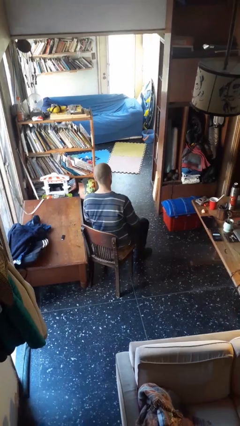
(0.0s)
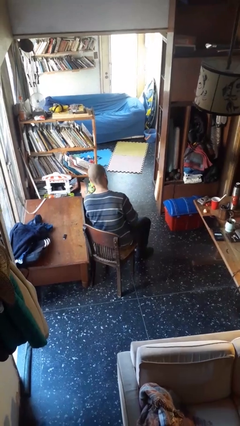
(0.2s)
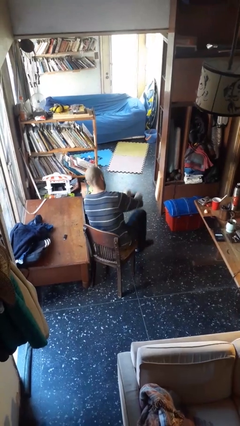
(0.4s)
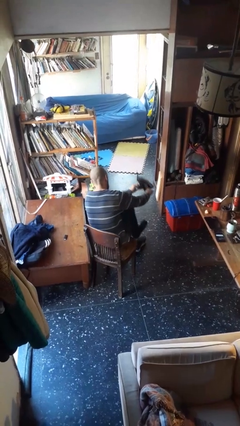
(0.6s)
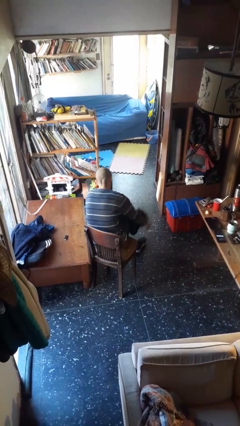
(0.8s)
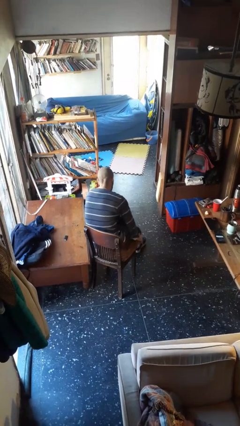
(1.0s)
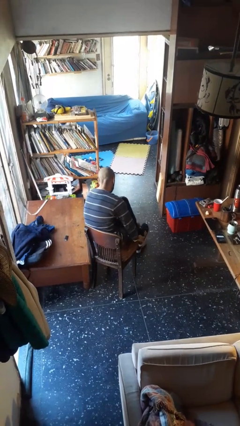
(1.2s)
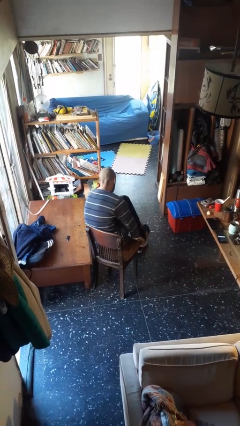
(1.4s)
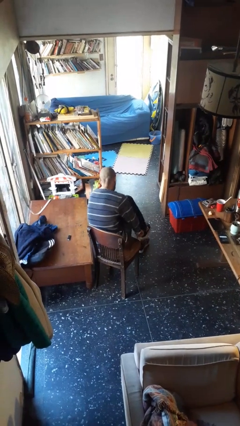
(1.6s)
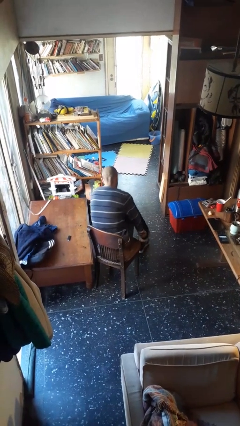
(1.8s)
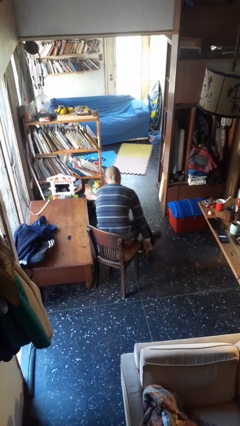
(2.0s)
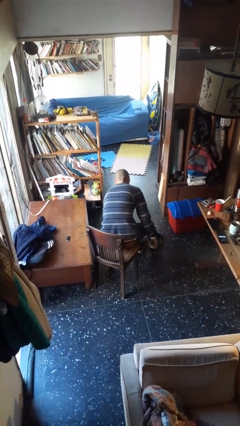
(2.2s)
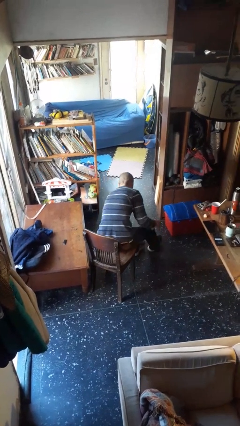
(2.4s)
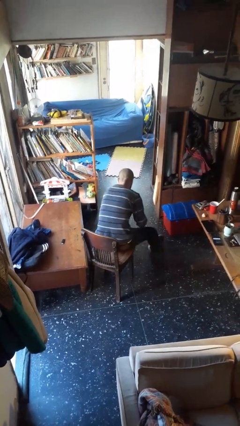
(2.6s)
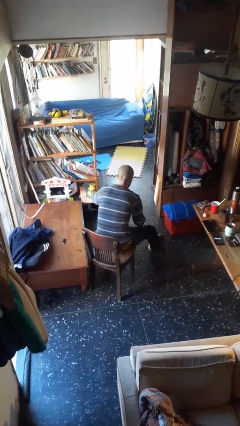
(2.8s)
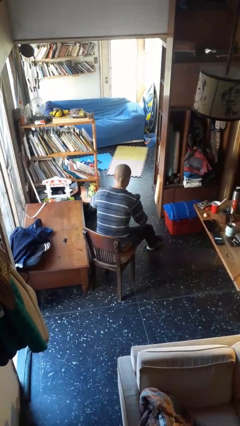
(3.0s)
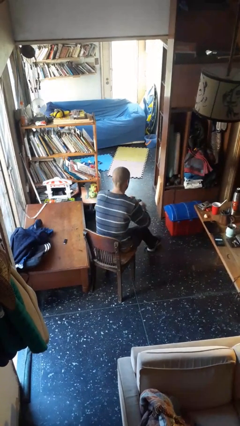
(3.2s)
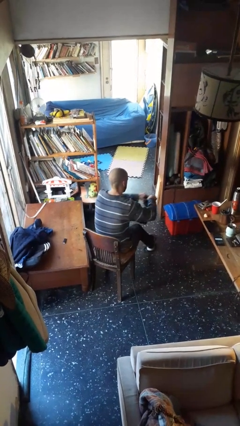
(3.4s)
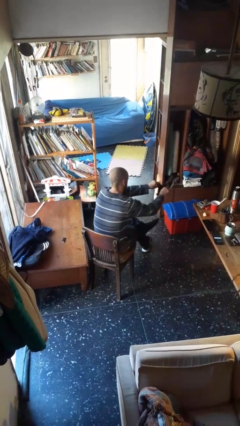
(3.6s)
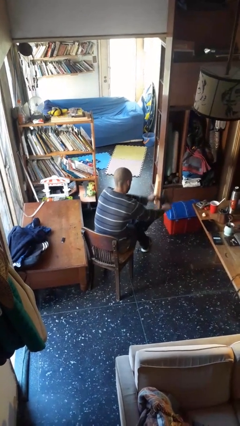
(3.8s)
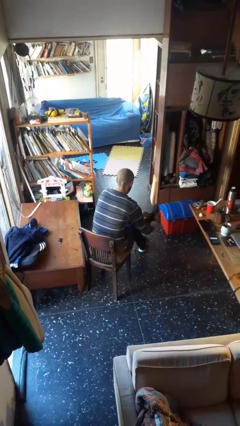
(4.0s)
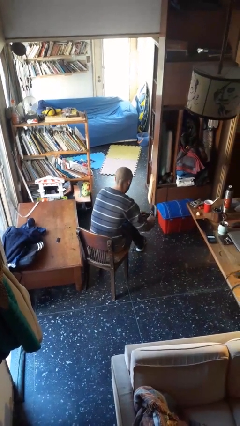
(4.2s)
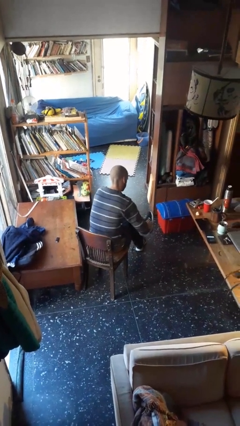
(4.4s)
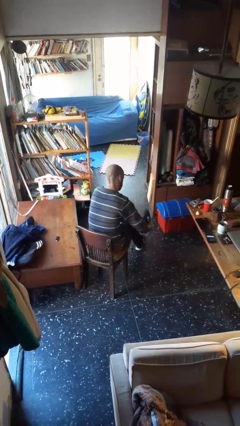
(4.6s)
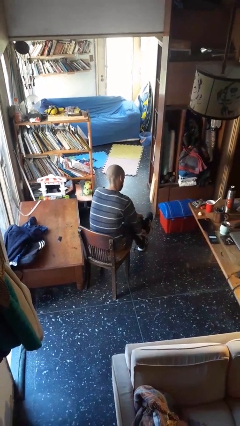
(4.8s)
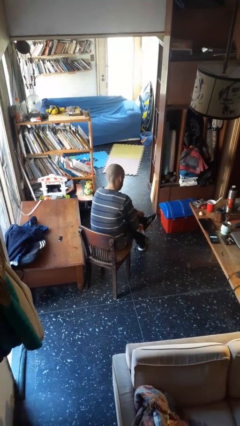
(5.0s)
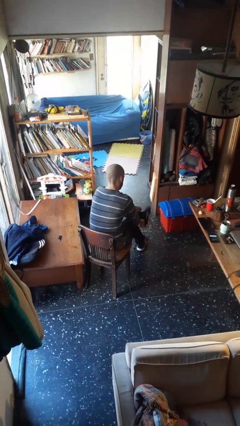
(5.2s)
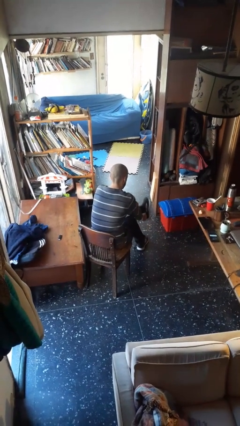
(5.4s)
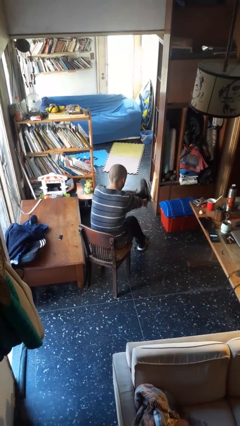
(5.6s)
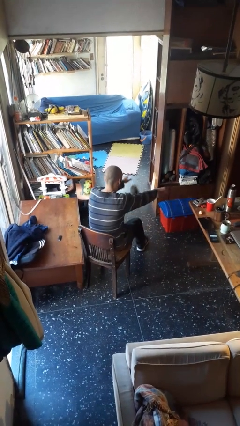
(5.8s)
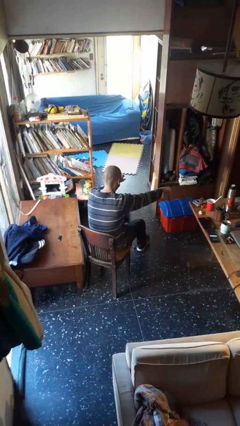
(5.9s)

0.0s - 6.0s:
person puts on shoes

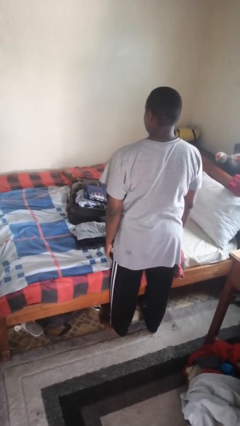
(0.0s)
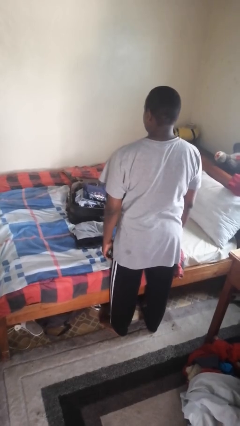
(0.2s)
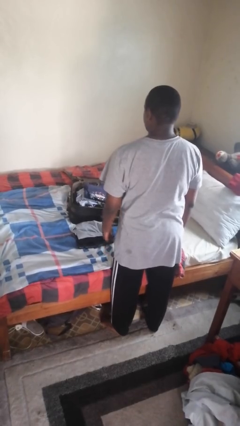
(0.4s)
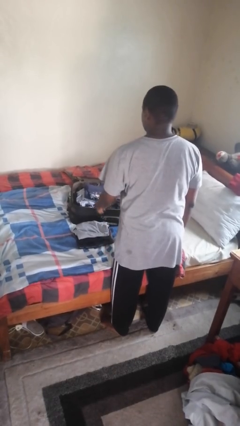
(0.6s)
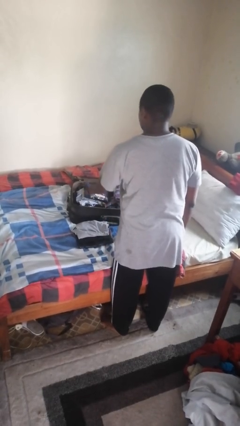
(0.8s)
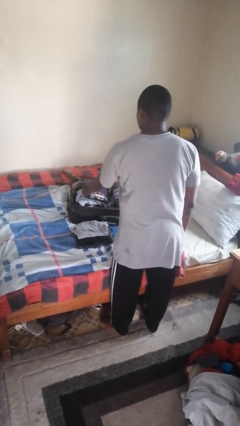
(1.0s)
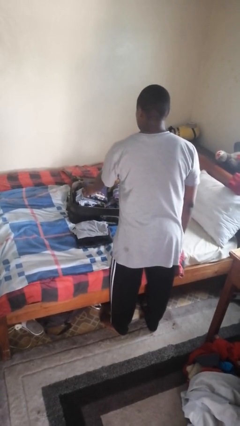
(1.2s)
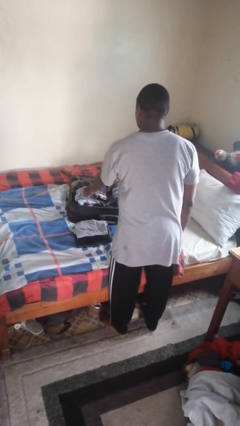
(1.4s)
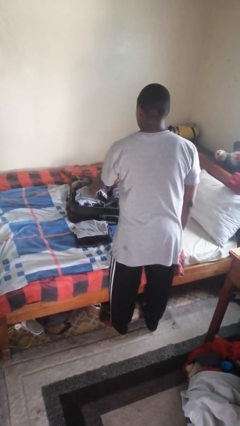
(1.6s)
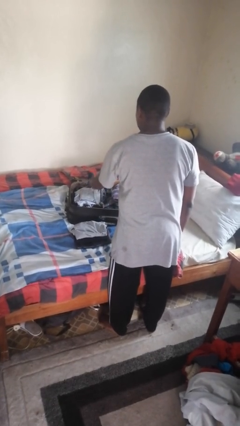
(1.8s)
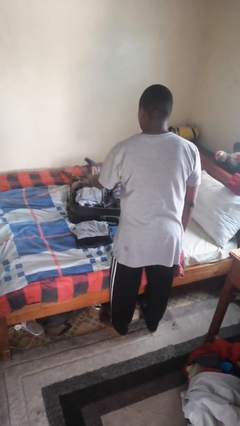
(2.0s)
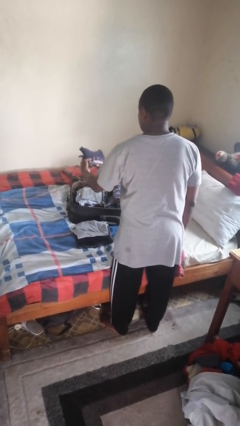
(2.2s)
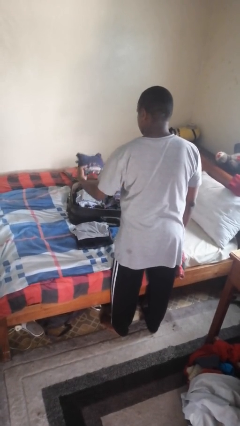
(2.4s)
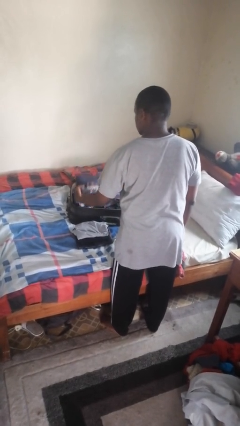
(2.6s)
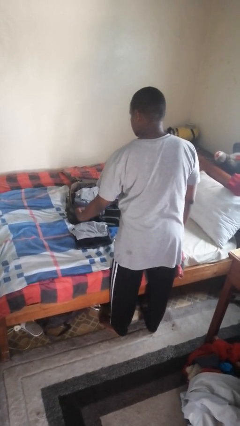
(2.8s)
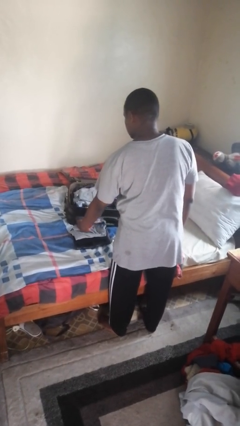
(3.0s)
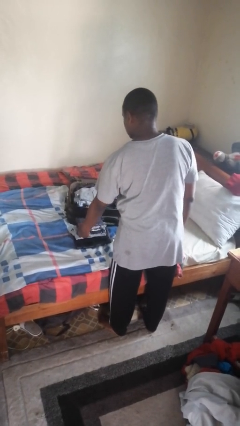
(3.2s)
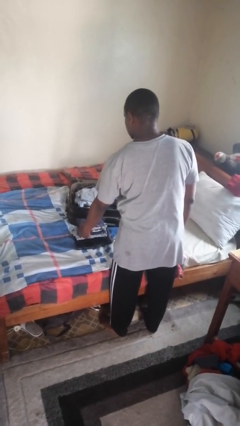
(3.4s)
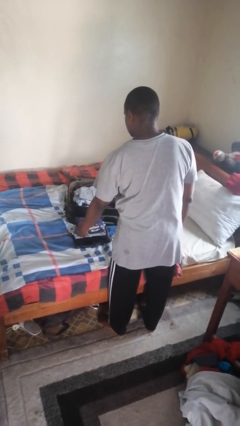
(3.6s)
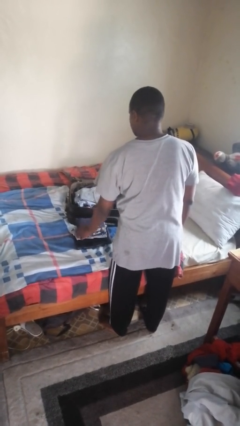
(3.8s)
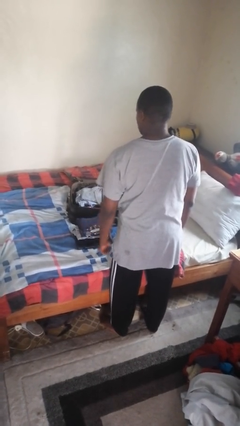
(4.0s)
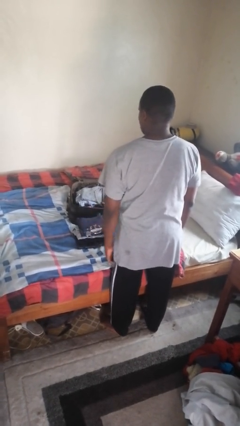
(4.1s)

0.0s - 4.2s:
person unloads clothes from suitcase

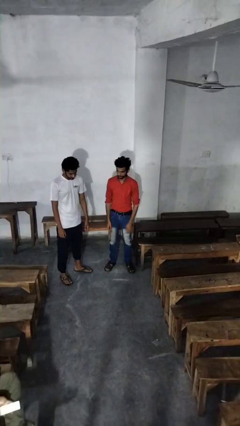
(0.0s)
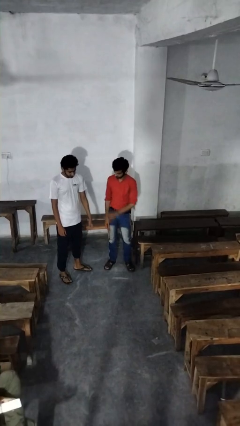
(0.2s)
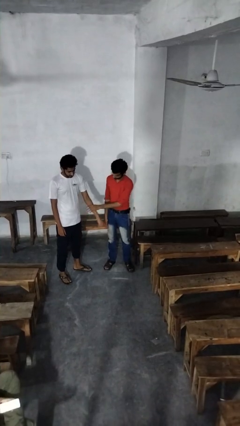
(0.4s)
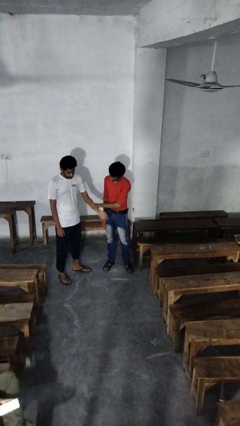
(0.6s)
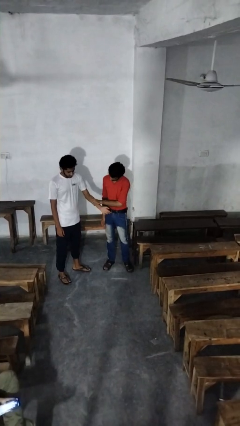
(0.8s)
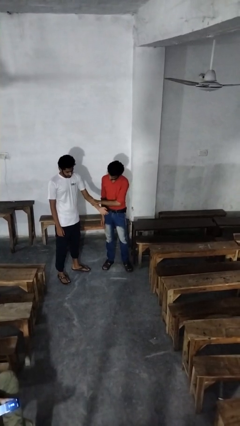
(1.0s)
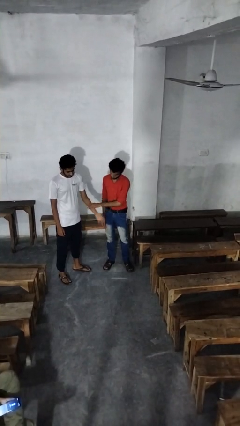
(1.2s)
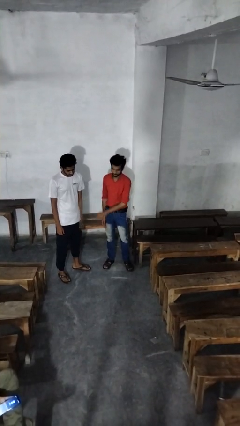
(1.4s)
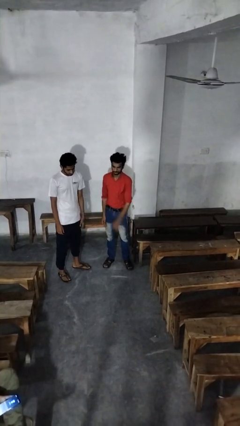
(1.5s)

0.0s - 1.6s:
person grabs person by forearm

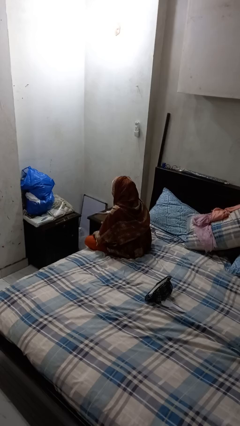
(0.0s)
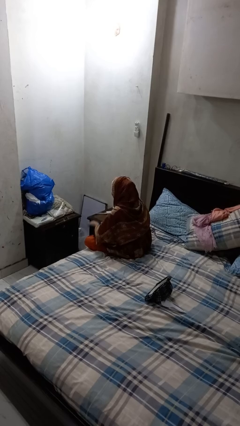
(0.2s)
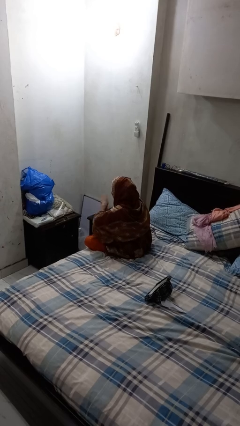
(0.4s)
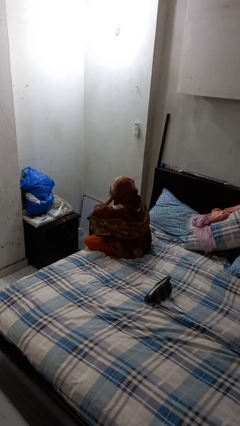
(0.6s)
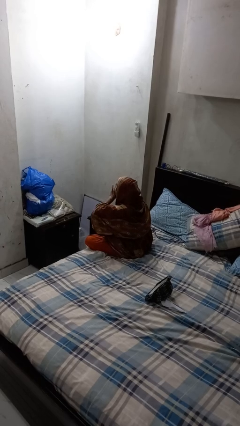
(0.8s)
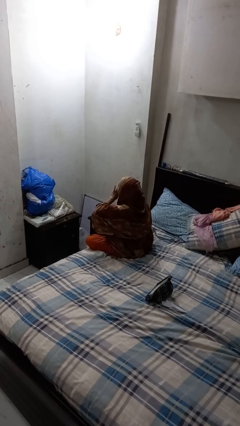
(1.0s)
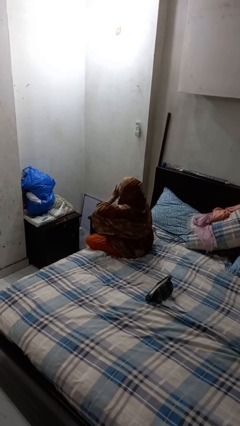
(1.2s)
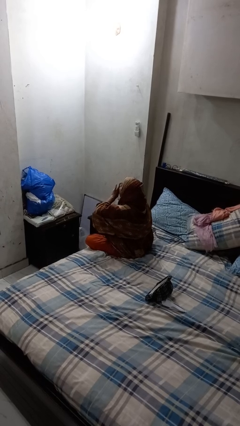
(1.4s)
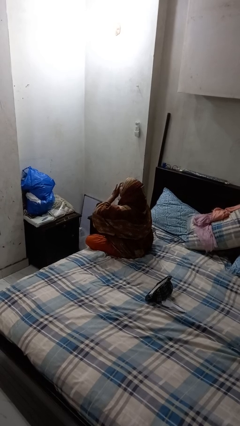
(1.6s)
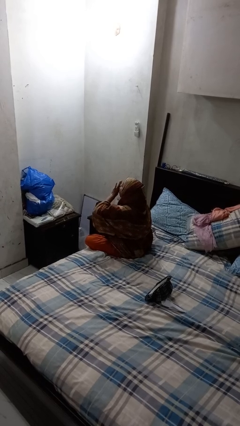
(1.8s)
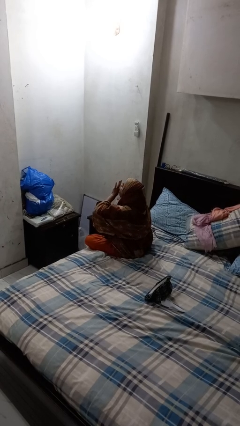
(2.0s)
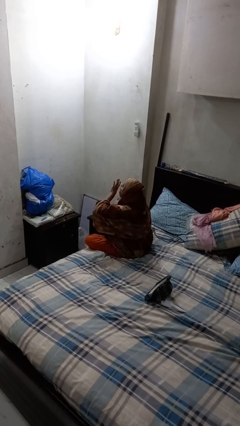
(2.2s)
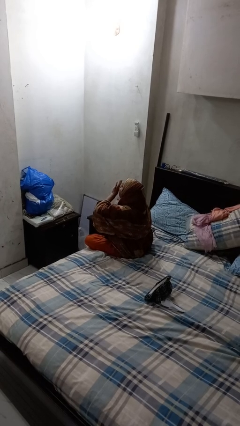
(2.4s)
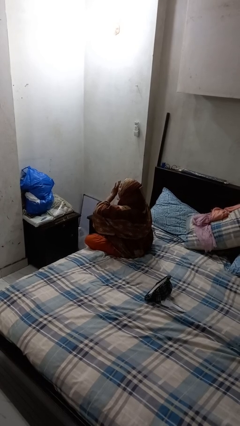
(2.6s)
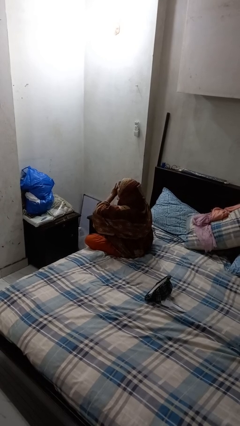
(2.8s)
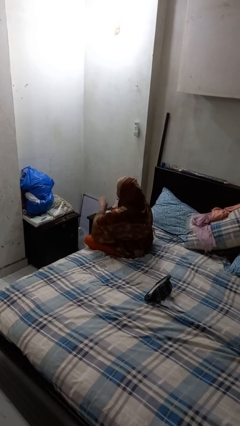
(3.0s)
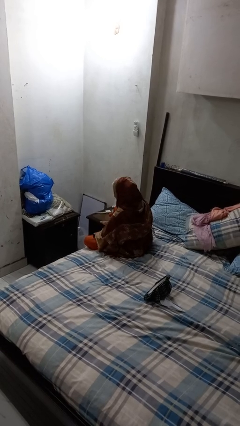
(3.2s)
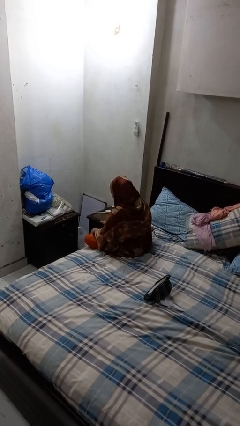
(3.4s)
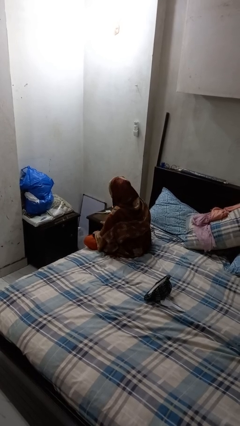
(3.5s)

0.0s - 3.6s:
person yawns

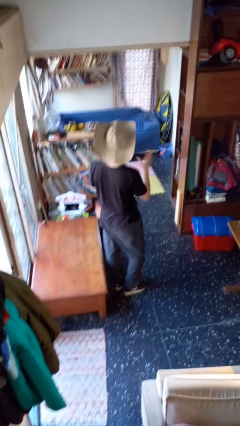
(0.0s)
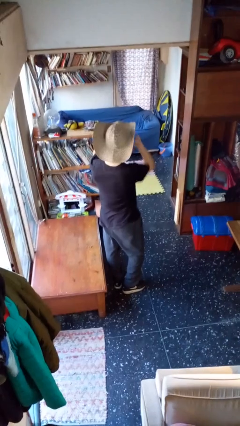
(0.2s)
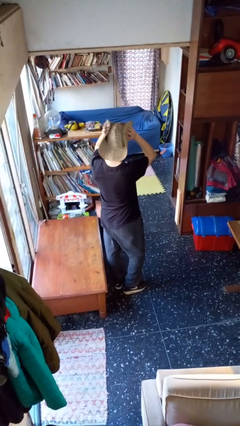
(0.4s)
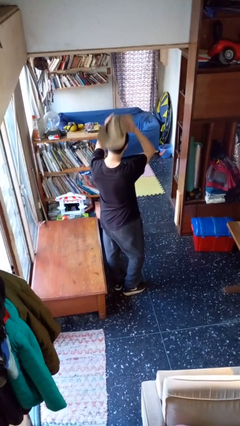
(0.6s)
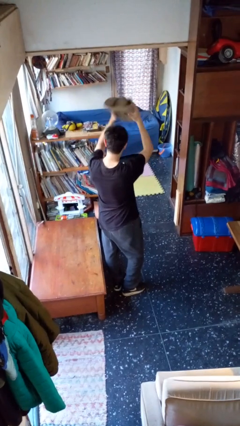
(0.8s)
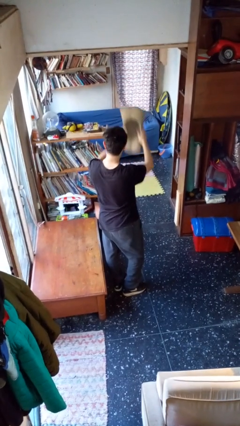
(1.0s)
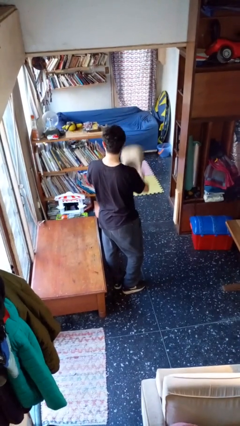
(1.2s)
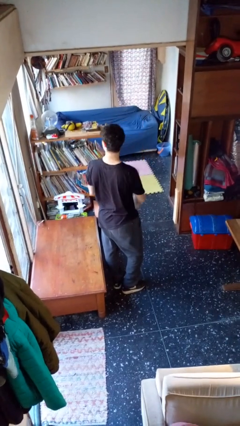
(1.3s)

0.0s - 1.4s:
person takes off hat

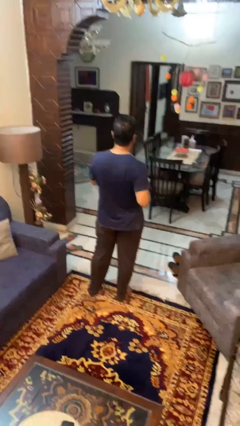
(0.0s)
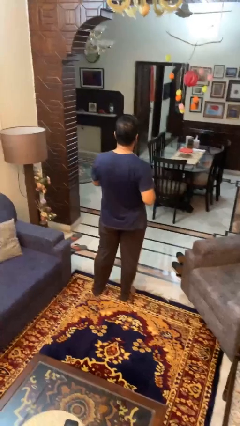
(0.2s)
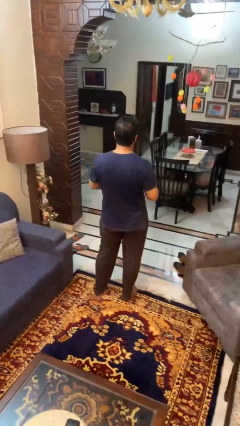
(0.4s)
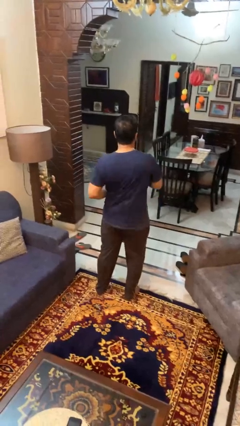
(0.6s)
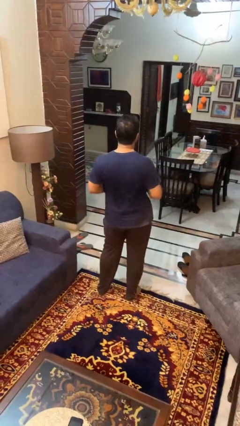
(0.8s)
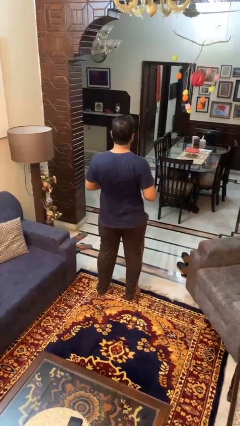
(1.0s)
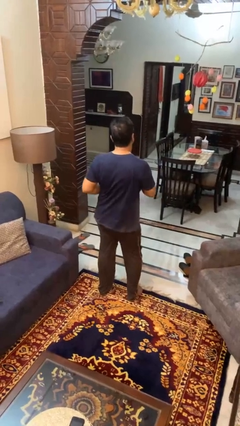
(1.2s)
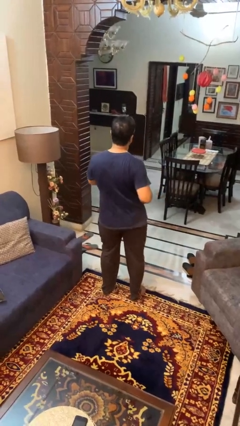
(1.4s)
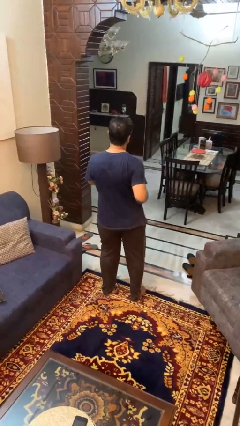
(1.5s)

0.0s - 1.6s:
person wiggles hips
